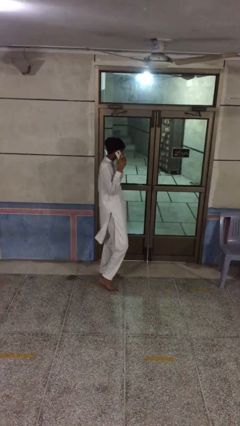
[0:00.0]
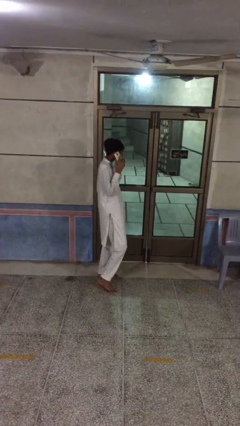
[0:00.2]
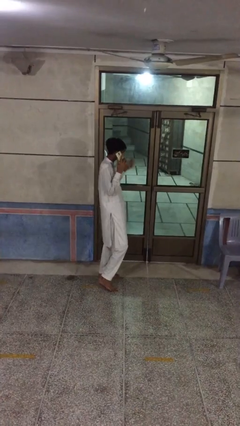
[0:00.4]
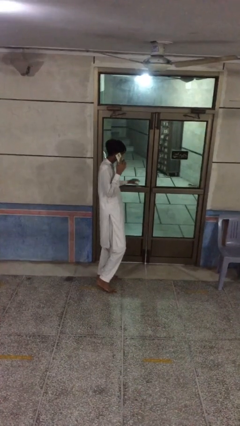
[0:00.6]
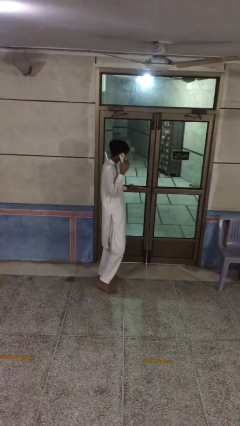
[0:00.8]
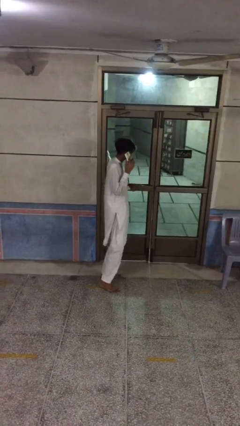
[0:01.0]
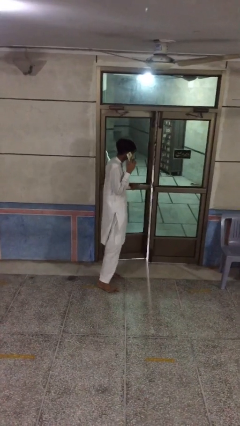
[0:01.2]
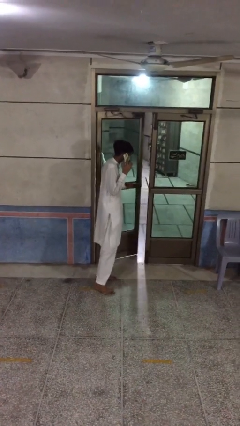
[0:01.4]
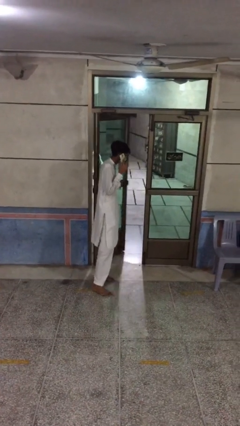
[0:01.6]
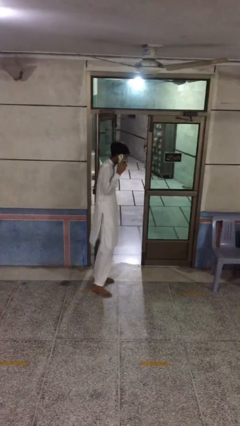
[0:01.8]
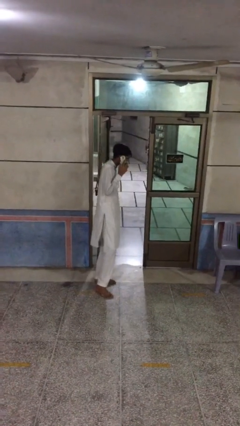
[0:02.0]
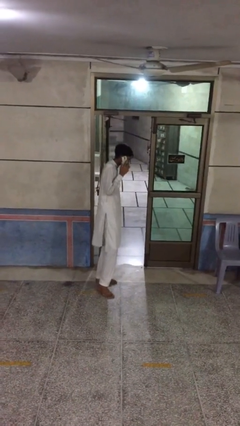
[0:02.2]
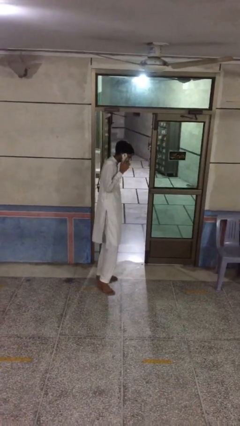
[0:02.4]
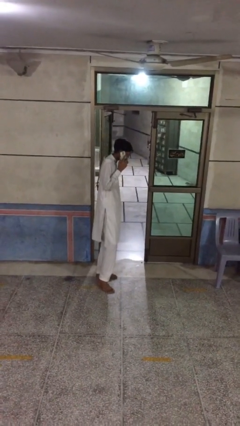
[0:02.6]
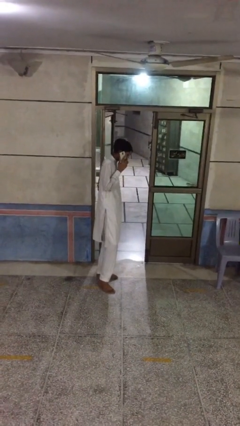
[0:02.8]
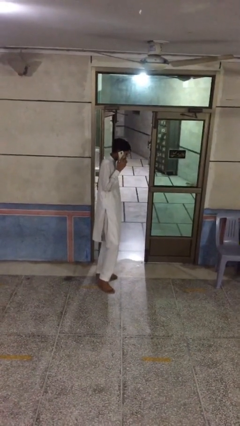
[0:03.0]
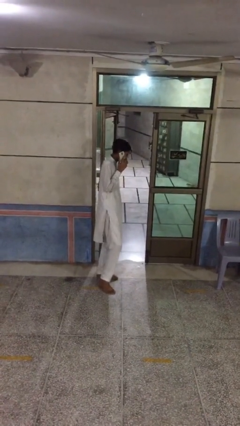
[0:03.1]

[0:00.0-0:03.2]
person opens facility door

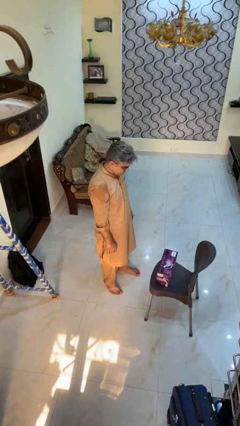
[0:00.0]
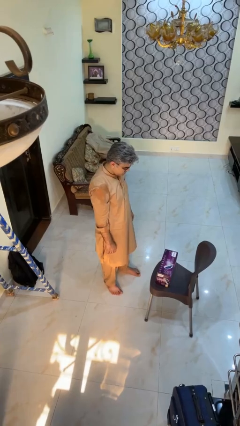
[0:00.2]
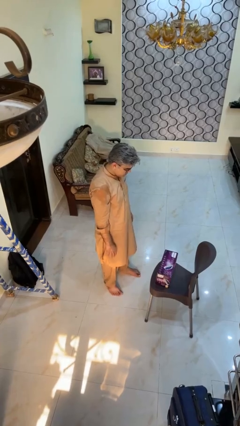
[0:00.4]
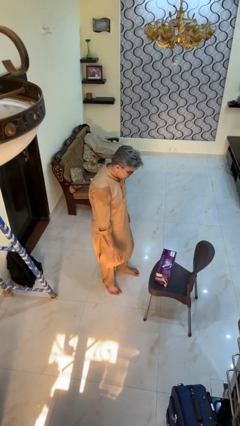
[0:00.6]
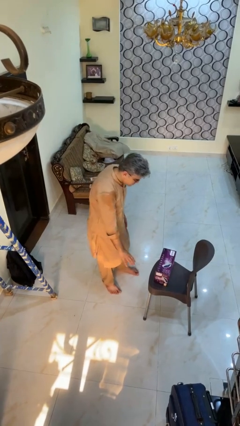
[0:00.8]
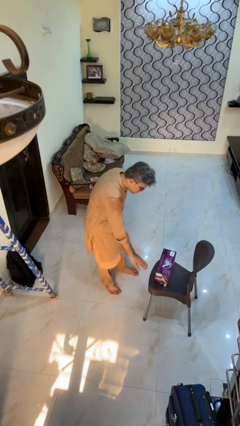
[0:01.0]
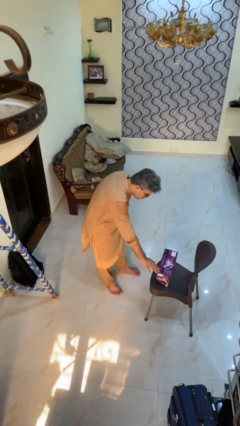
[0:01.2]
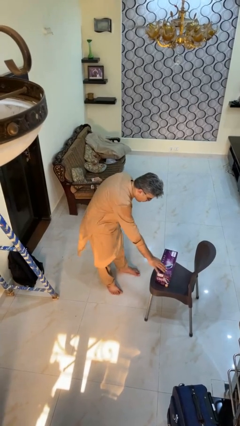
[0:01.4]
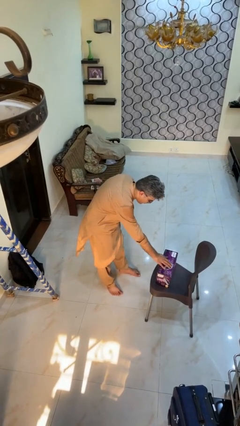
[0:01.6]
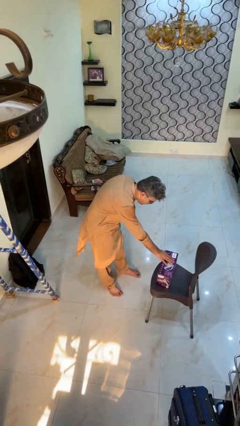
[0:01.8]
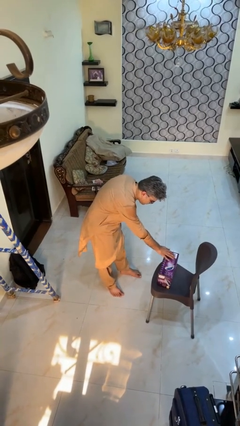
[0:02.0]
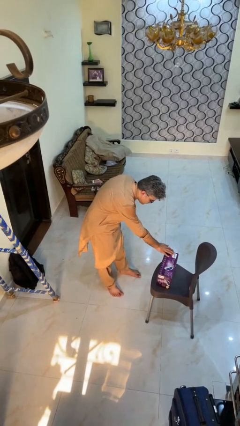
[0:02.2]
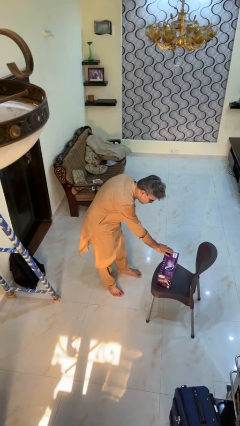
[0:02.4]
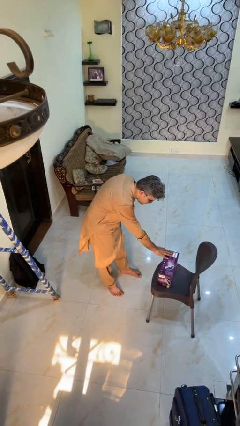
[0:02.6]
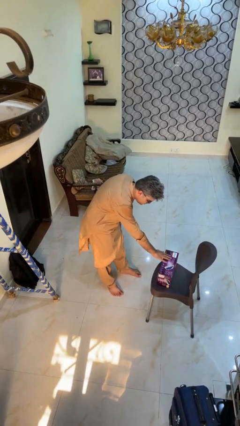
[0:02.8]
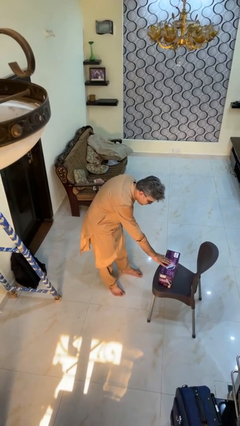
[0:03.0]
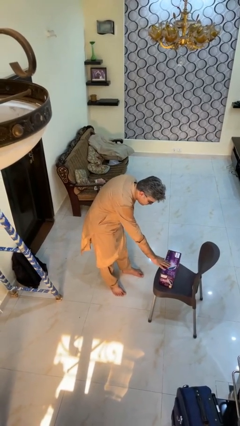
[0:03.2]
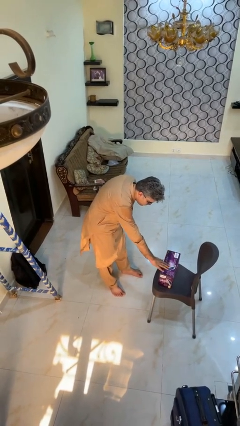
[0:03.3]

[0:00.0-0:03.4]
person waves hand over object

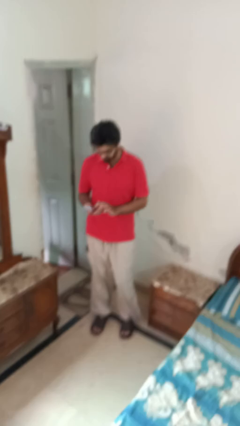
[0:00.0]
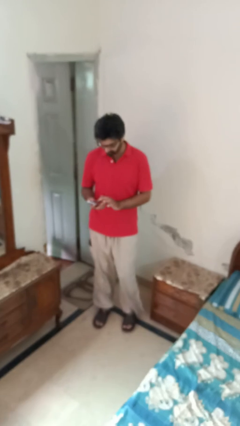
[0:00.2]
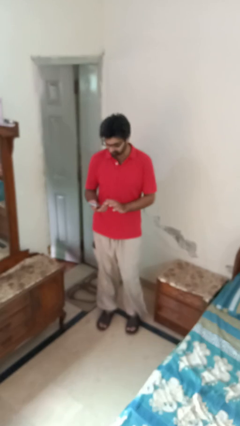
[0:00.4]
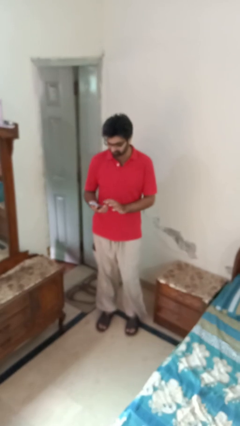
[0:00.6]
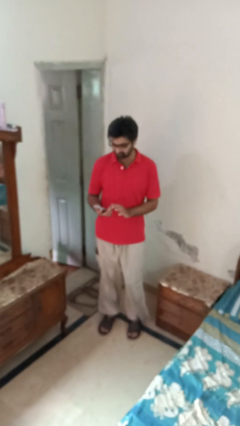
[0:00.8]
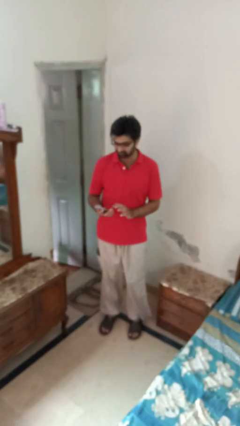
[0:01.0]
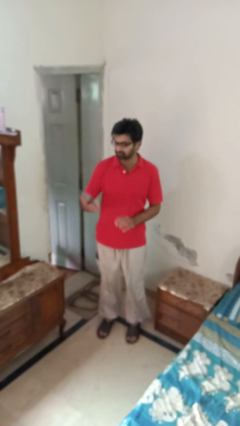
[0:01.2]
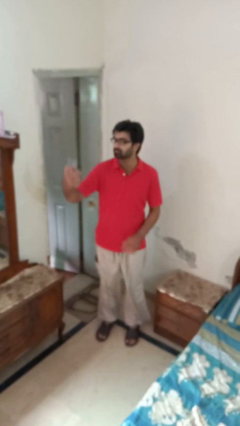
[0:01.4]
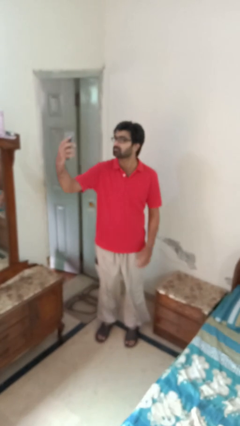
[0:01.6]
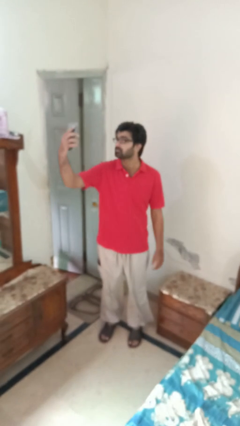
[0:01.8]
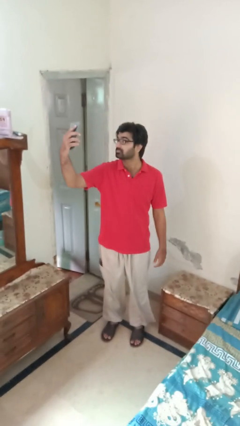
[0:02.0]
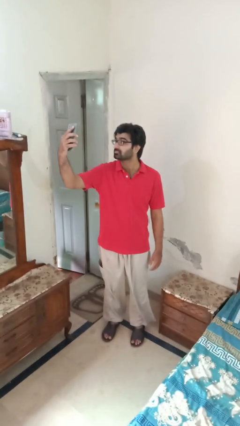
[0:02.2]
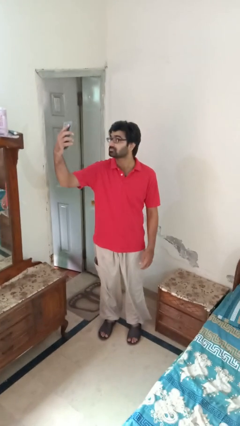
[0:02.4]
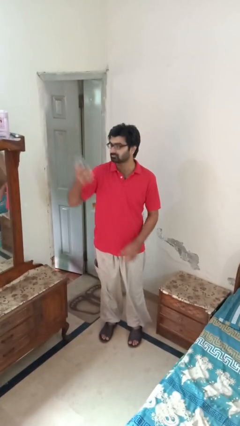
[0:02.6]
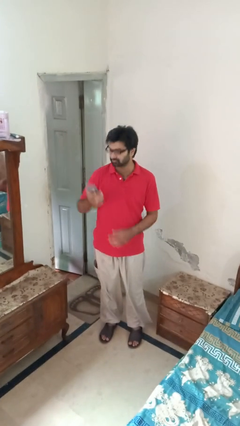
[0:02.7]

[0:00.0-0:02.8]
person takes selfie

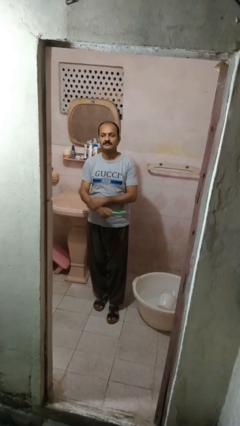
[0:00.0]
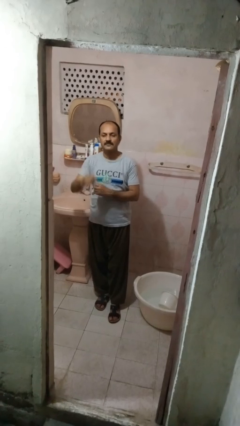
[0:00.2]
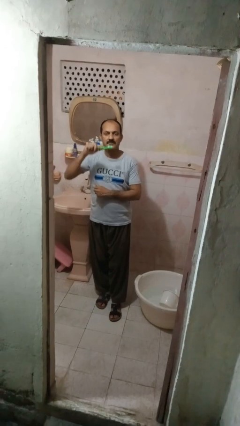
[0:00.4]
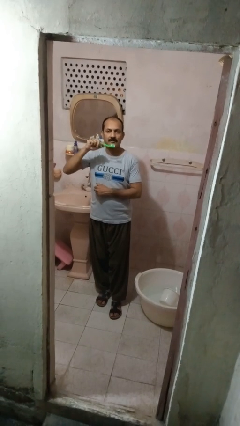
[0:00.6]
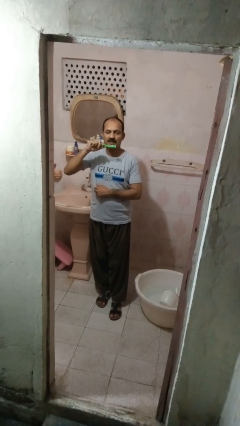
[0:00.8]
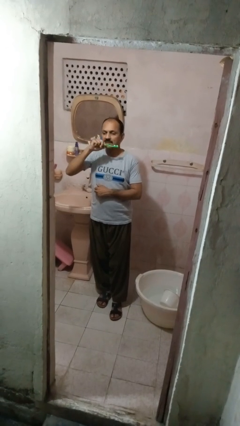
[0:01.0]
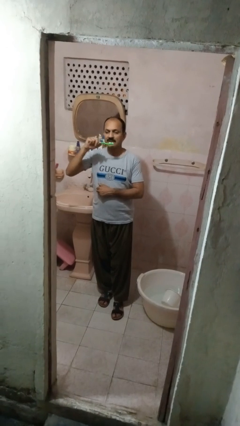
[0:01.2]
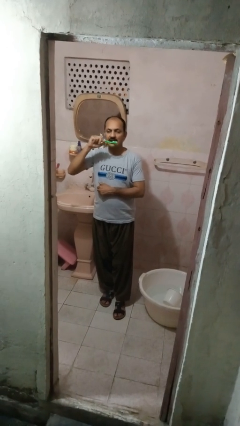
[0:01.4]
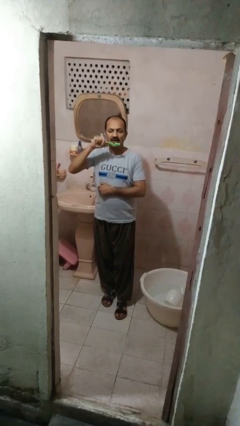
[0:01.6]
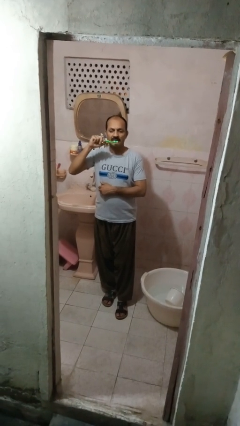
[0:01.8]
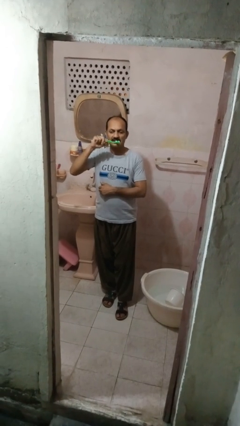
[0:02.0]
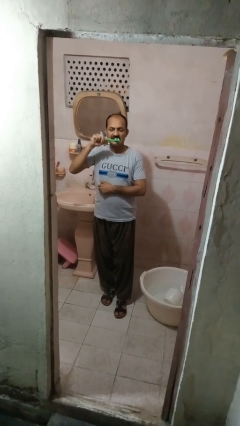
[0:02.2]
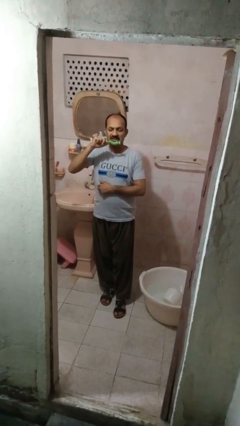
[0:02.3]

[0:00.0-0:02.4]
person brushes teeth

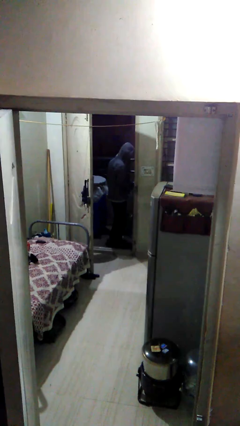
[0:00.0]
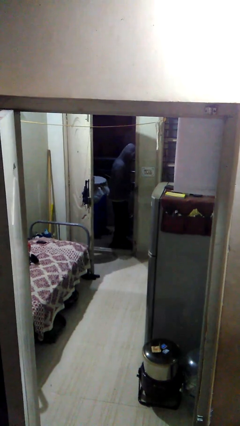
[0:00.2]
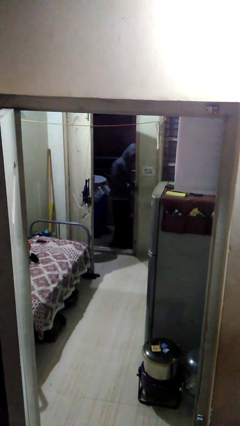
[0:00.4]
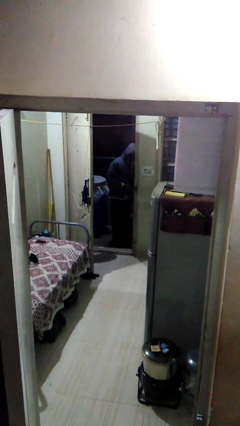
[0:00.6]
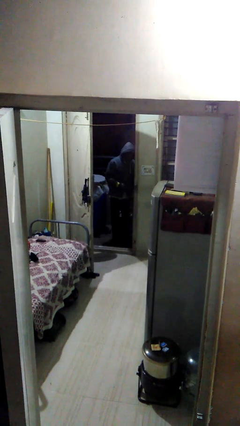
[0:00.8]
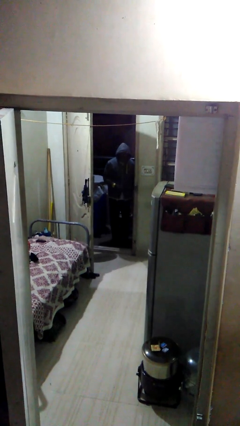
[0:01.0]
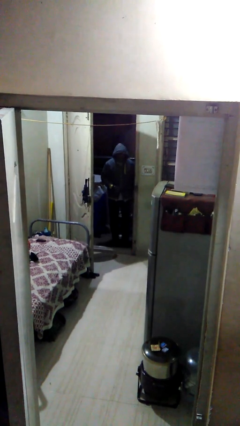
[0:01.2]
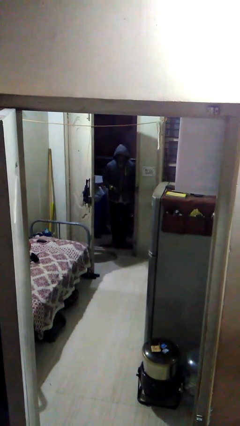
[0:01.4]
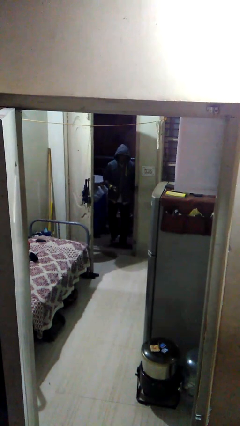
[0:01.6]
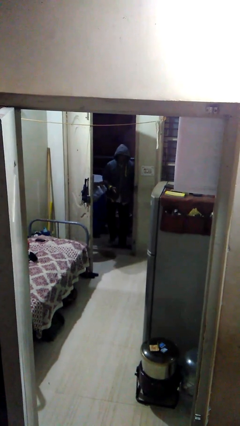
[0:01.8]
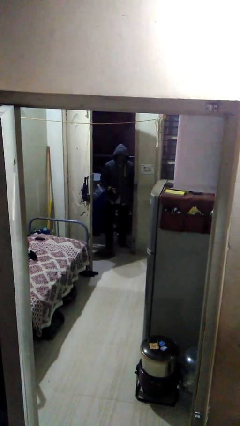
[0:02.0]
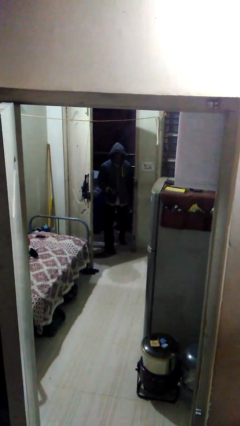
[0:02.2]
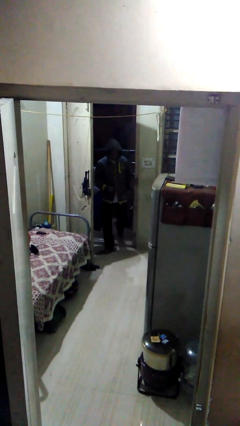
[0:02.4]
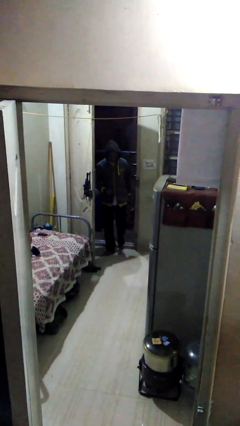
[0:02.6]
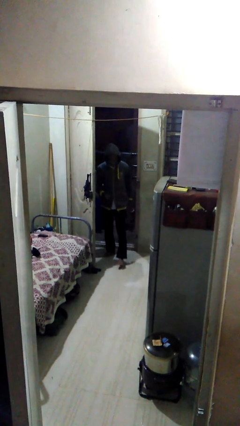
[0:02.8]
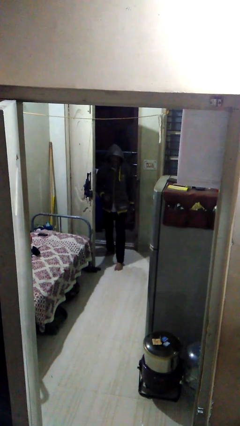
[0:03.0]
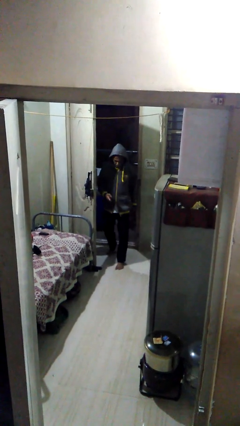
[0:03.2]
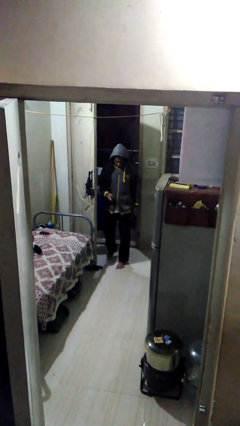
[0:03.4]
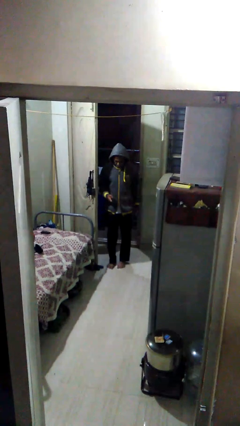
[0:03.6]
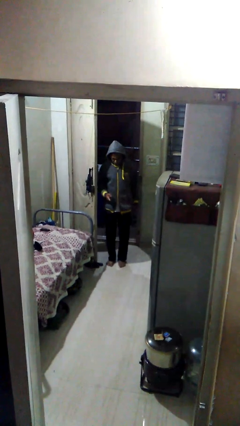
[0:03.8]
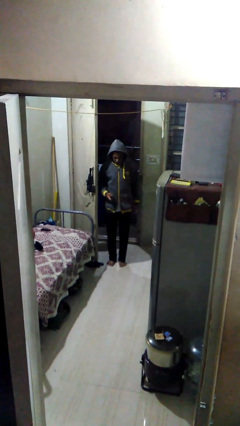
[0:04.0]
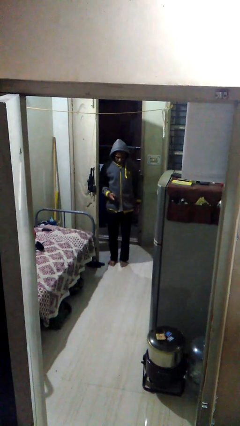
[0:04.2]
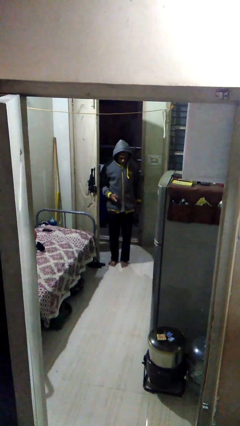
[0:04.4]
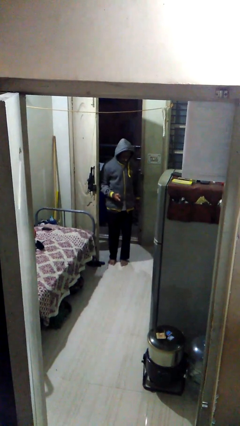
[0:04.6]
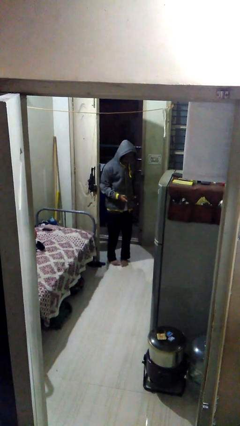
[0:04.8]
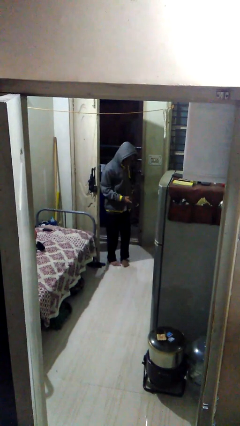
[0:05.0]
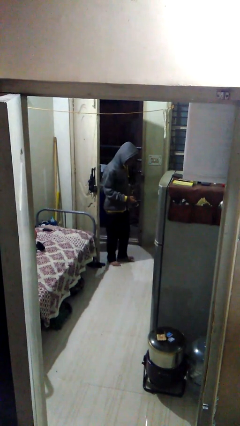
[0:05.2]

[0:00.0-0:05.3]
person enters scene through structure

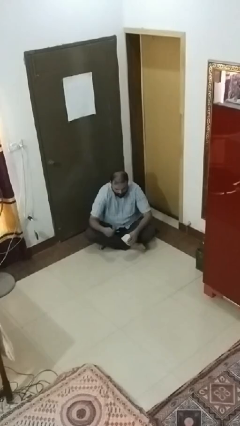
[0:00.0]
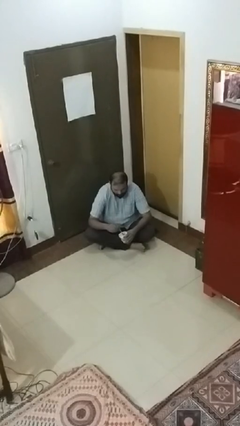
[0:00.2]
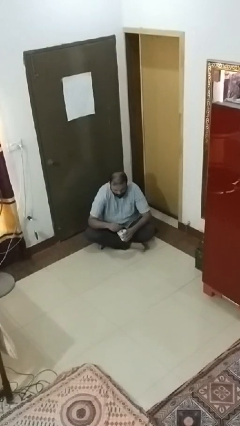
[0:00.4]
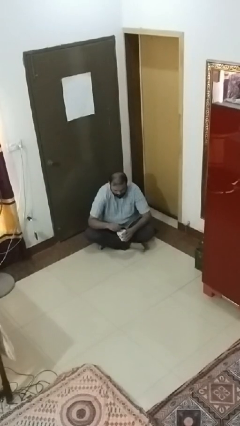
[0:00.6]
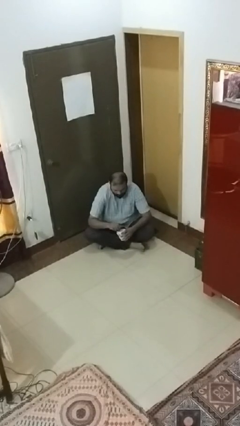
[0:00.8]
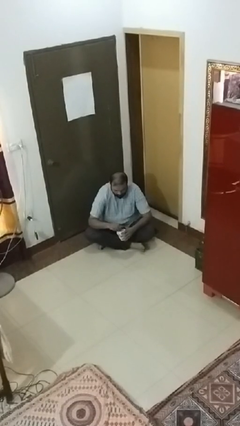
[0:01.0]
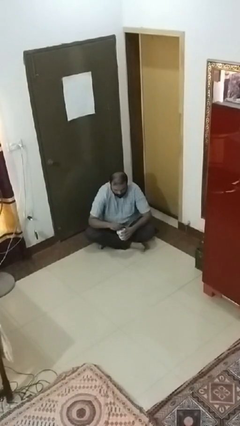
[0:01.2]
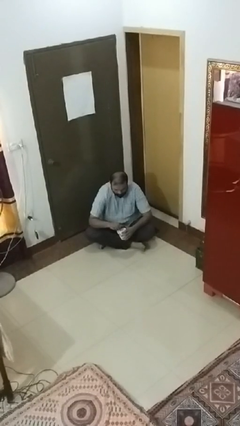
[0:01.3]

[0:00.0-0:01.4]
person stirs mug
